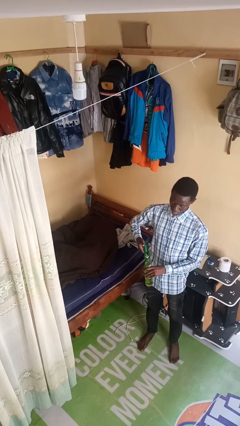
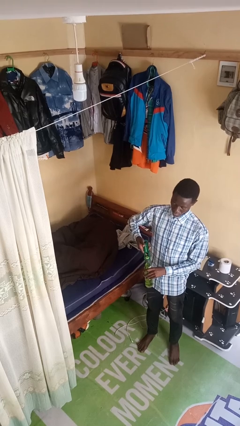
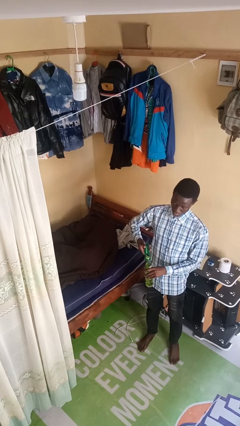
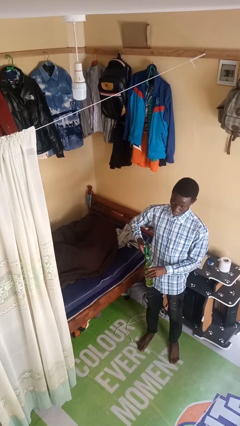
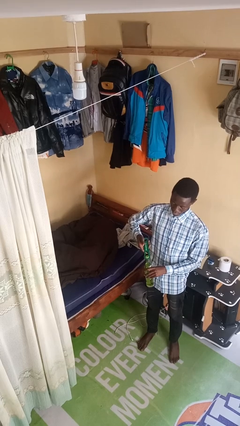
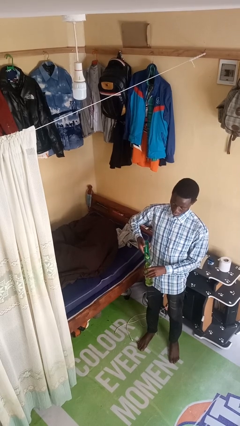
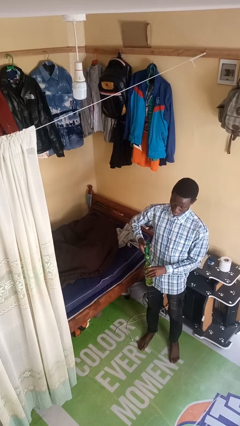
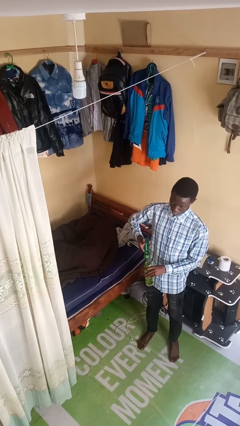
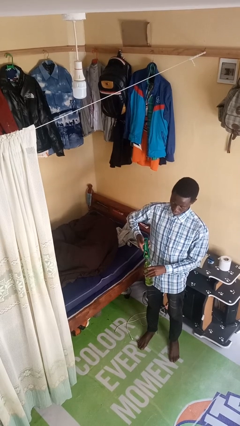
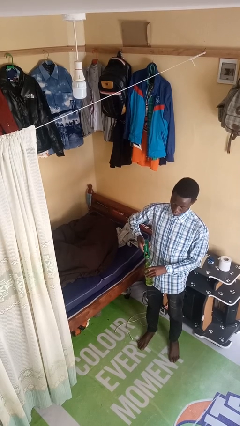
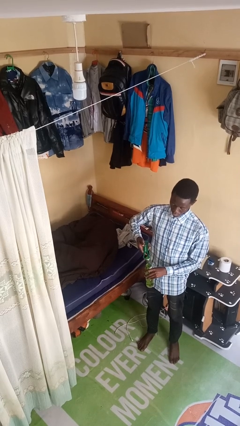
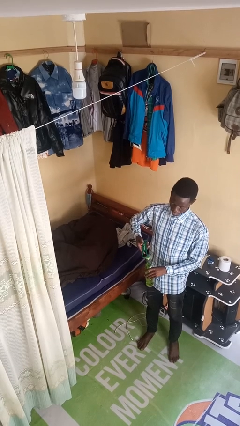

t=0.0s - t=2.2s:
person opens can with can opener

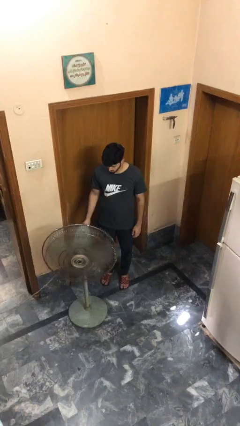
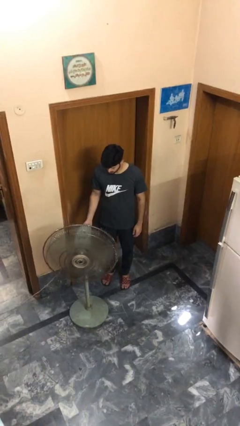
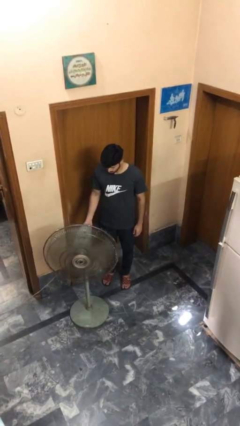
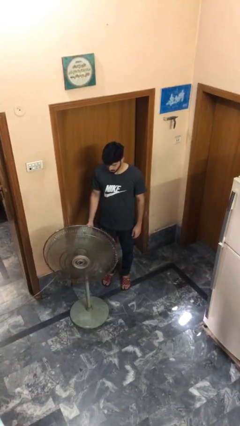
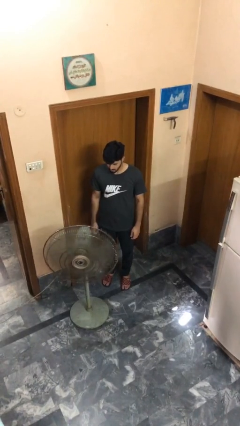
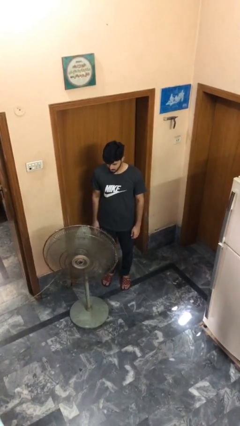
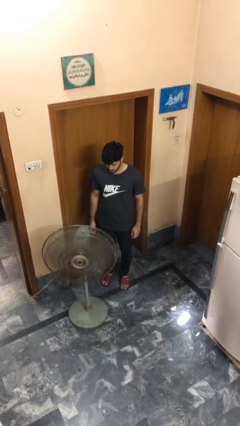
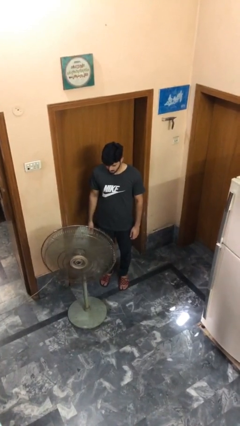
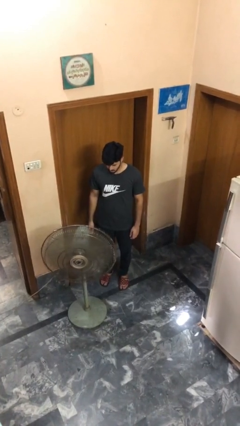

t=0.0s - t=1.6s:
person turns on fan

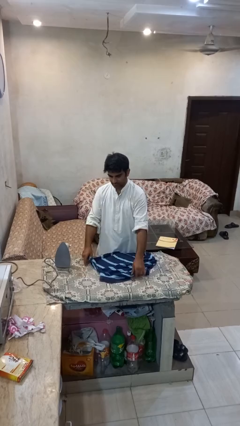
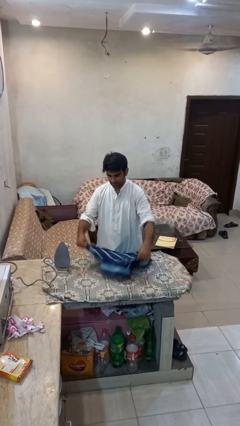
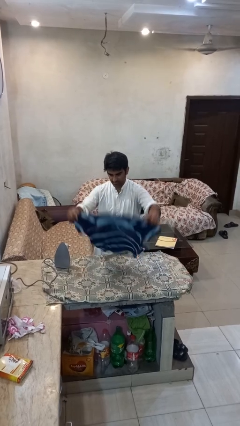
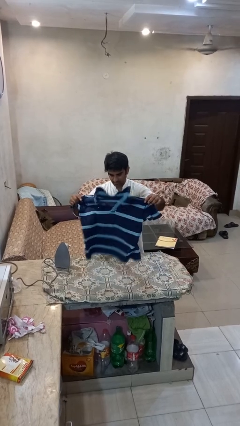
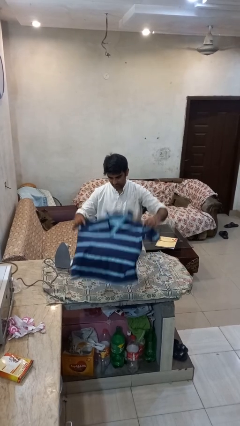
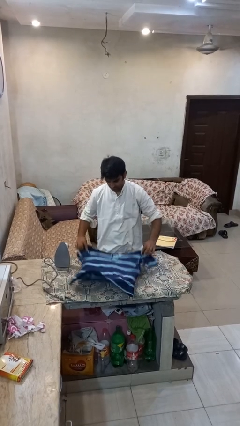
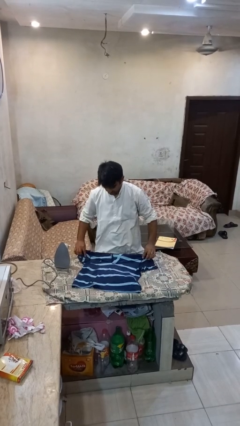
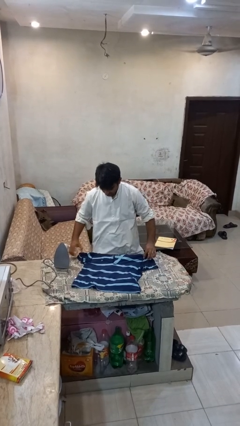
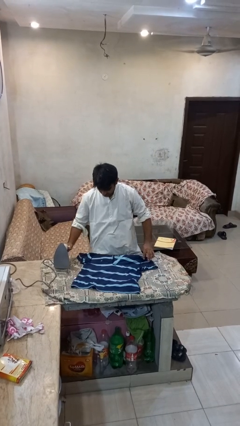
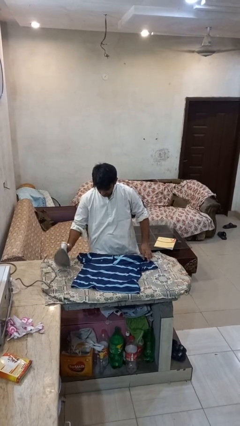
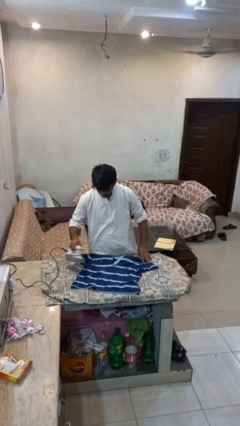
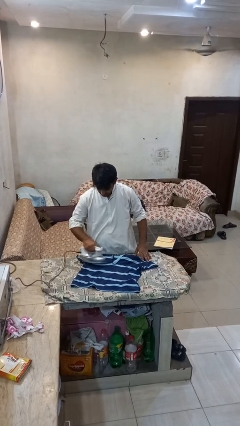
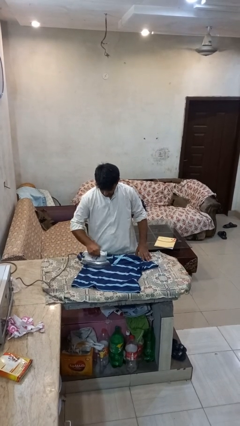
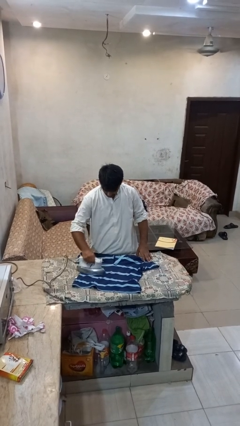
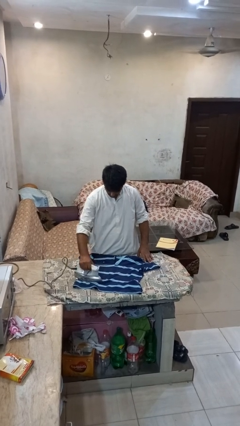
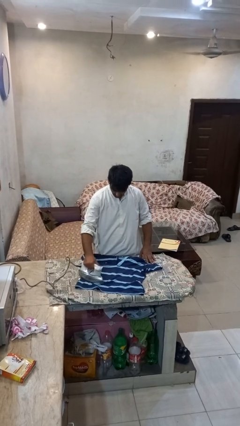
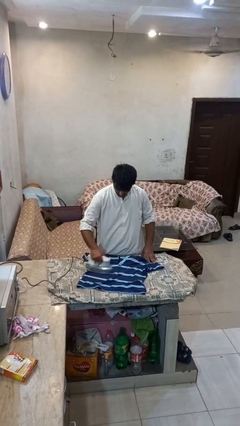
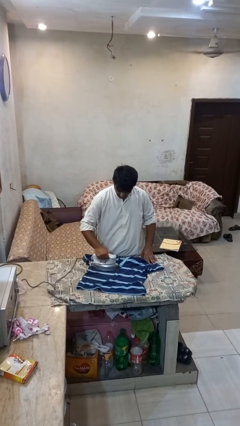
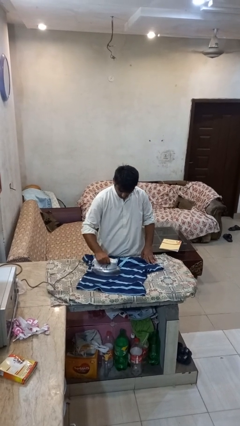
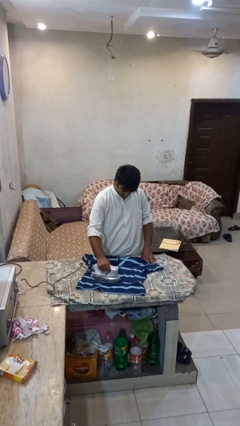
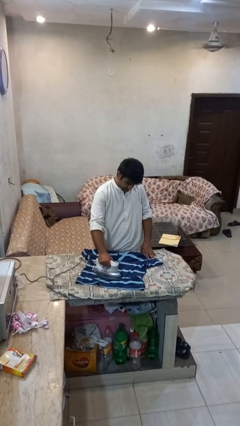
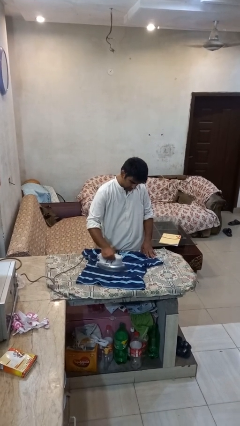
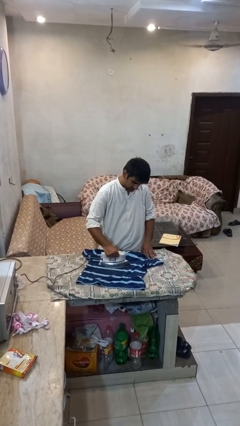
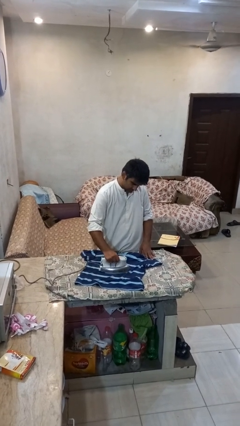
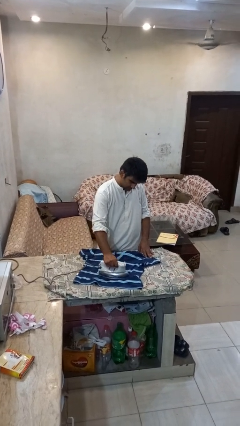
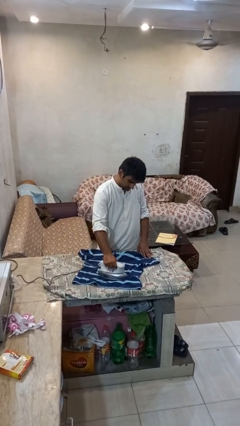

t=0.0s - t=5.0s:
person irons clothes

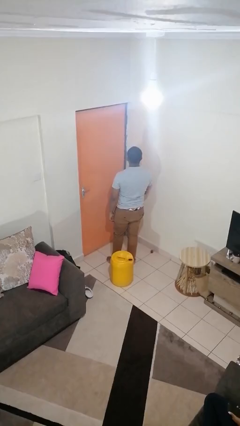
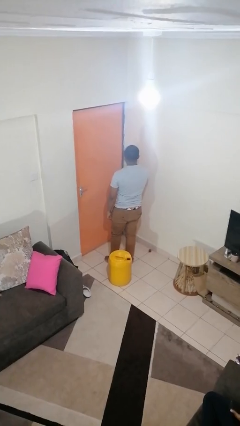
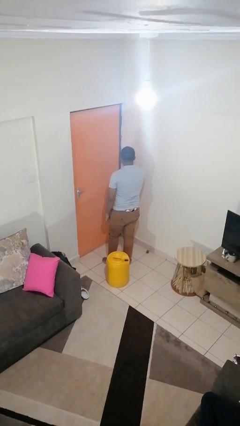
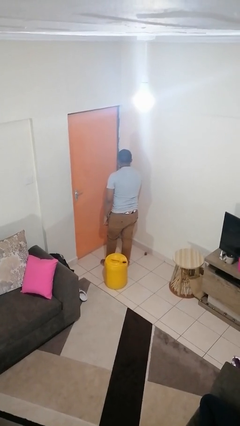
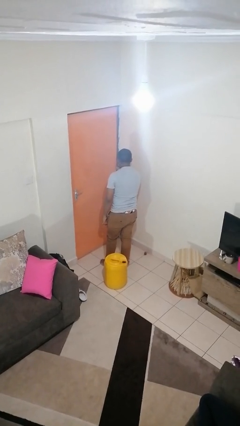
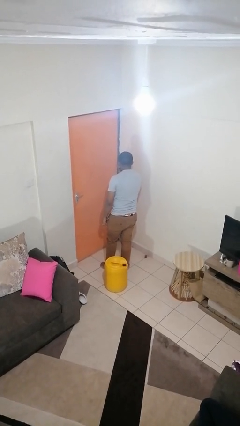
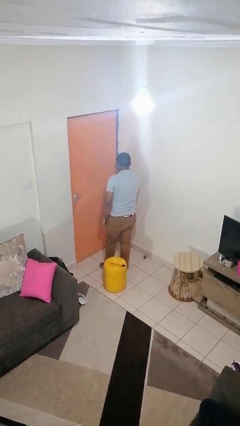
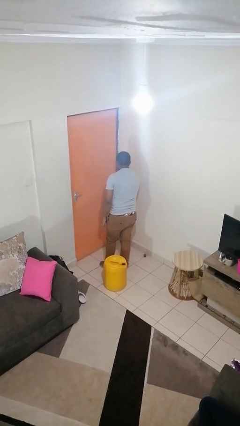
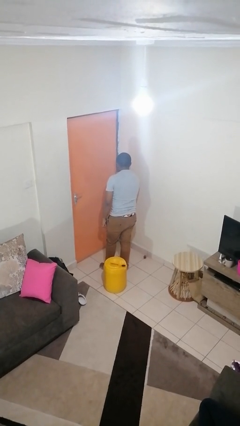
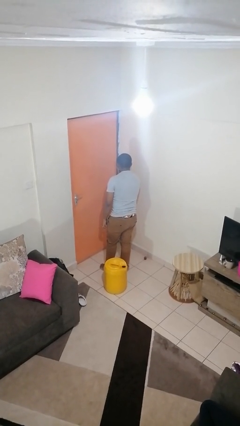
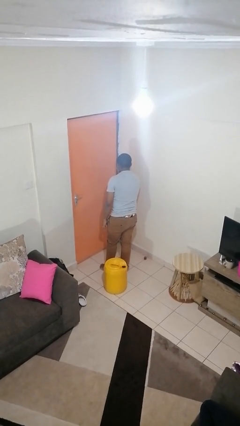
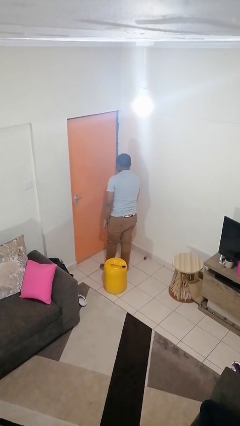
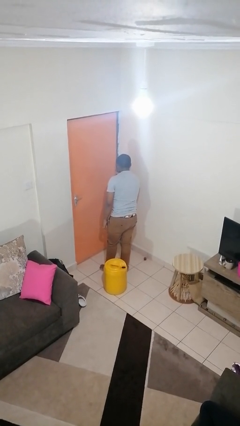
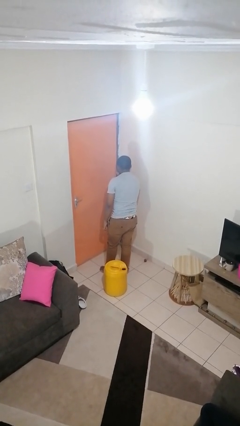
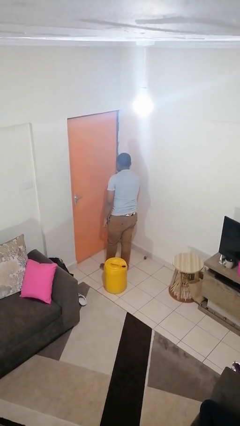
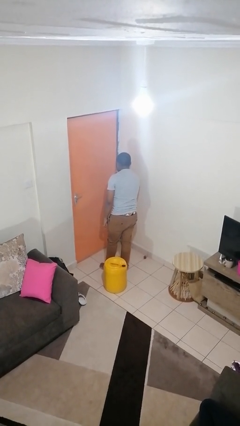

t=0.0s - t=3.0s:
person gestures watch closely

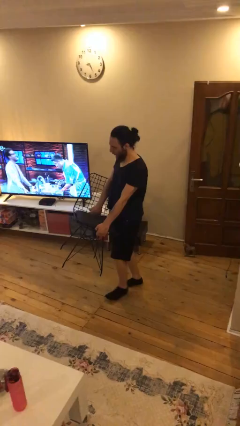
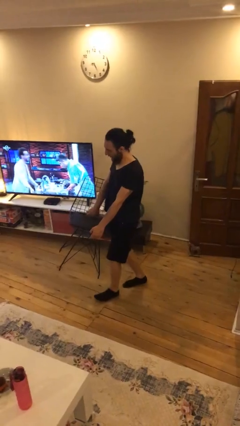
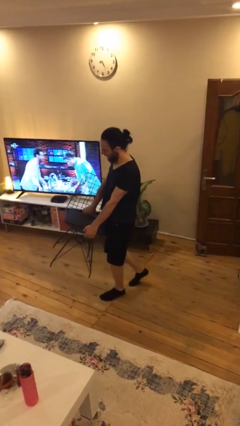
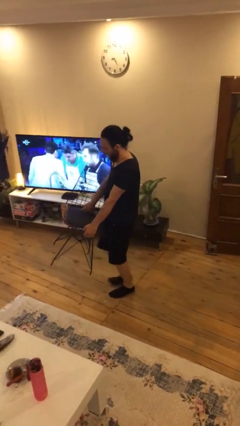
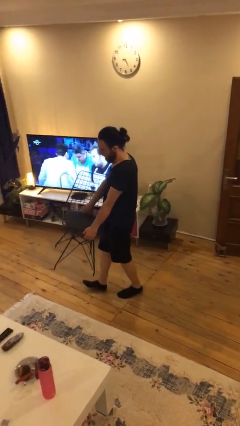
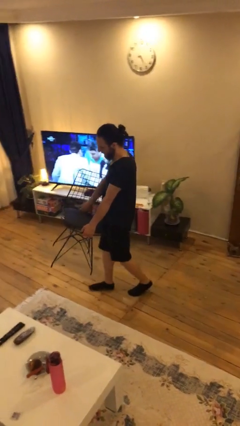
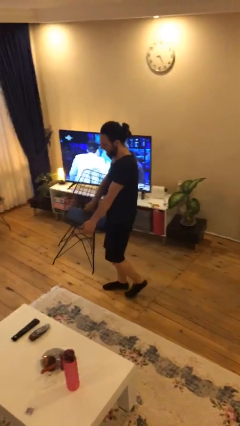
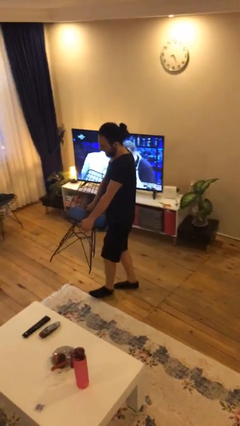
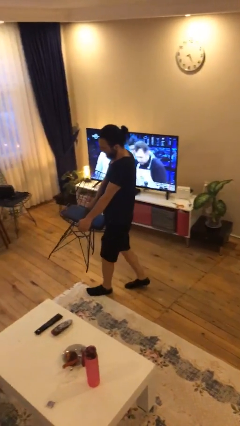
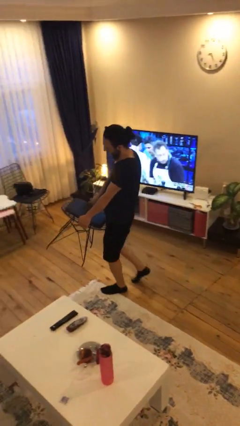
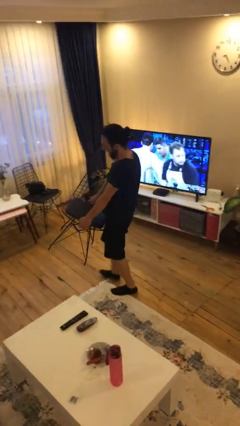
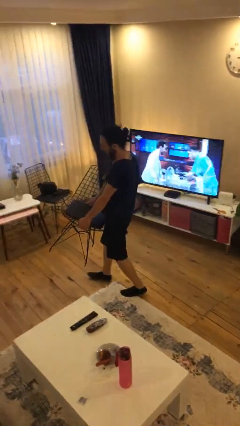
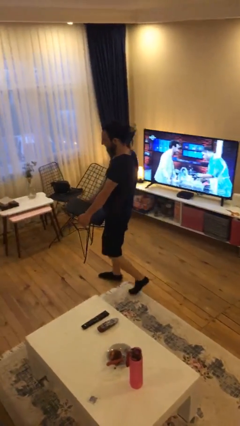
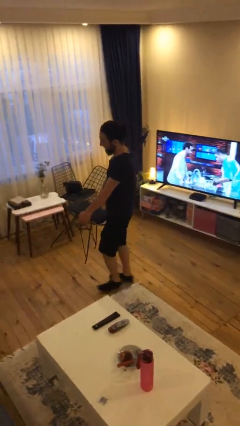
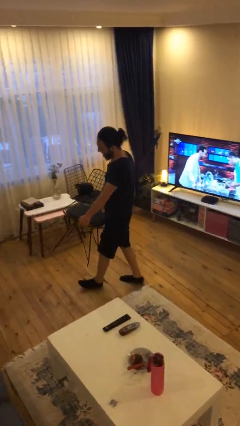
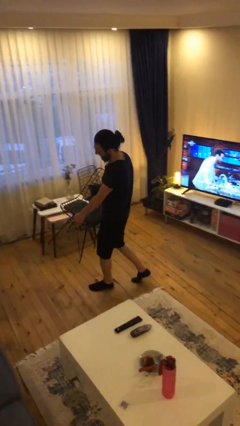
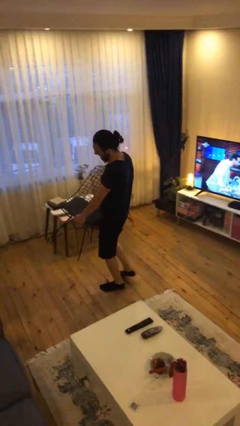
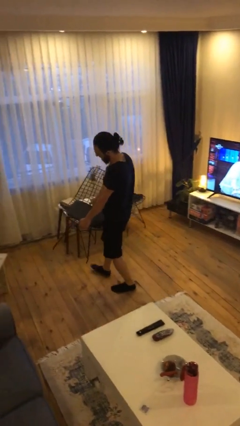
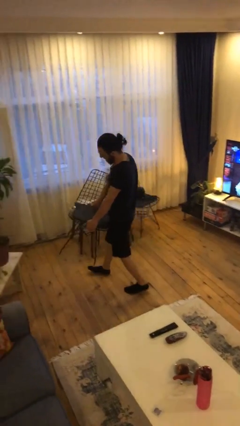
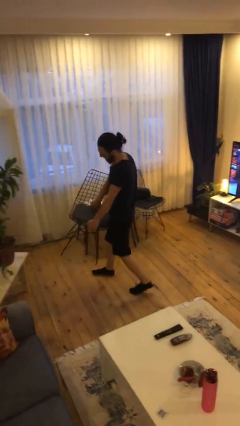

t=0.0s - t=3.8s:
person carries heavy object

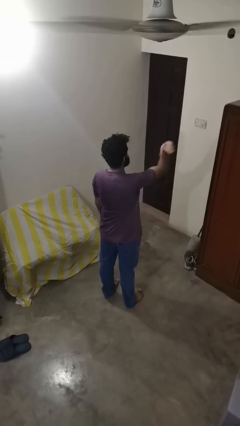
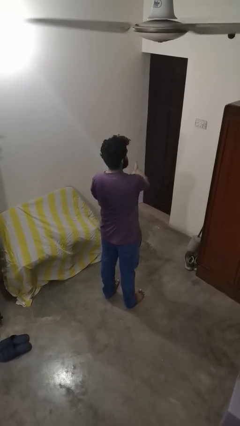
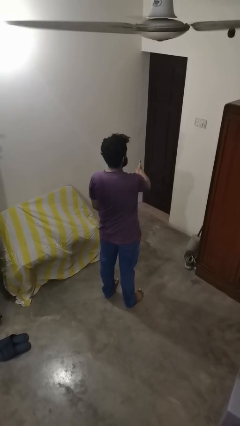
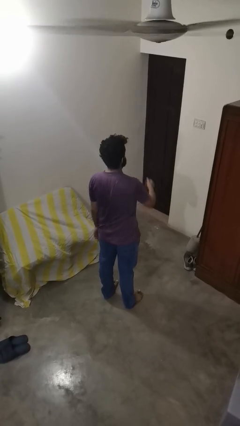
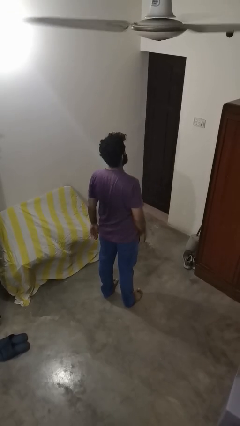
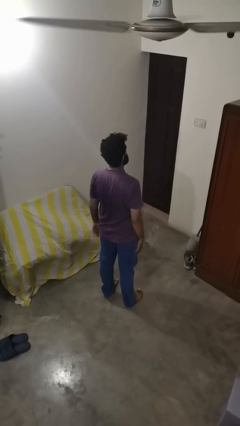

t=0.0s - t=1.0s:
person karate chop

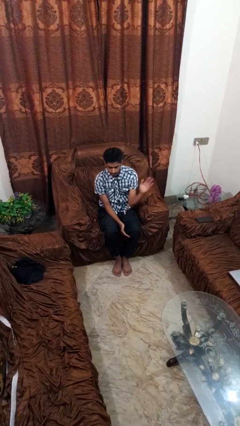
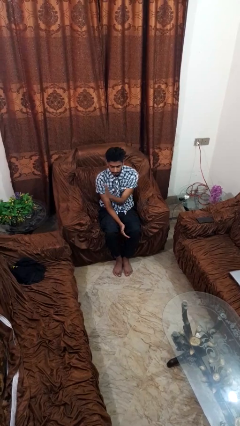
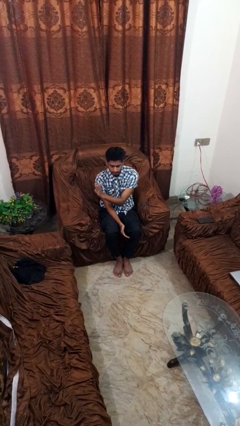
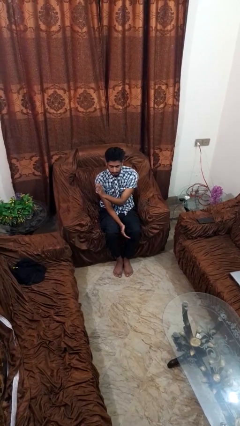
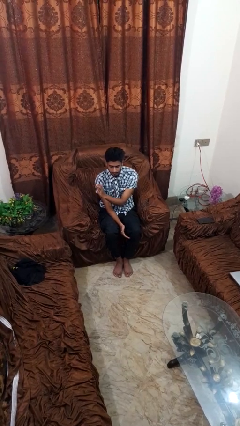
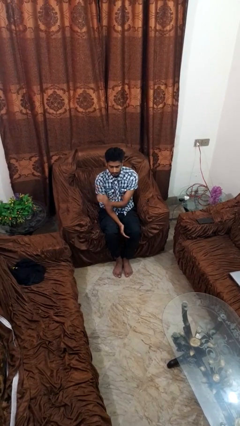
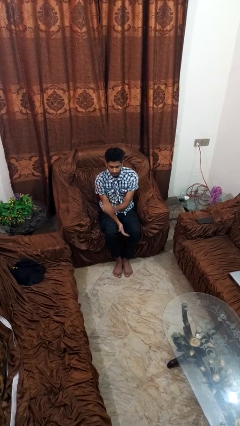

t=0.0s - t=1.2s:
person gestures swipe right
